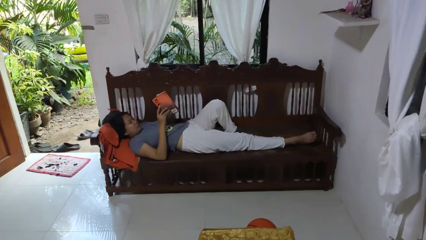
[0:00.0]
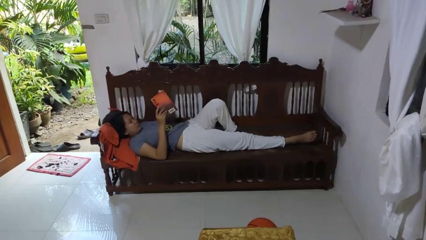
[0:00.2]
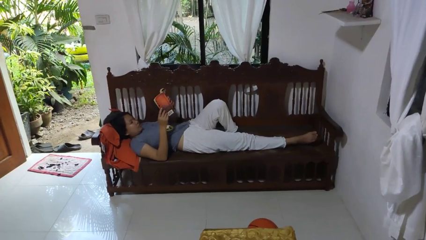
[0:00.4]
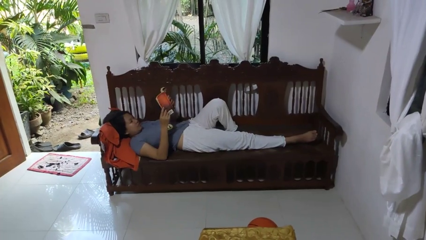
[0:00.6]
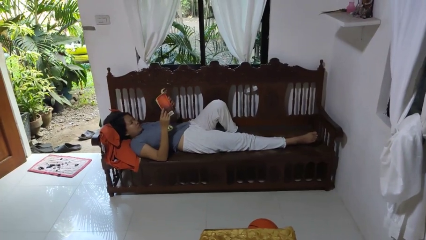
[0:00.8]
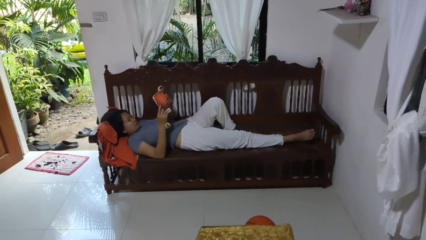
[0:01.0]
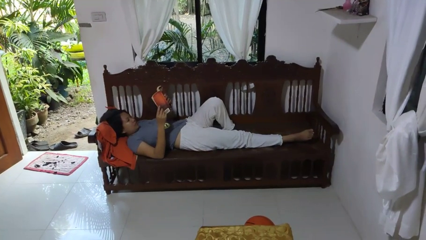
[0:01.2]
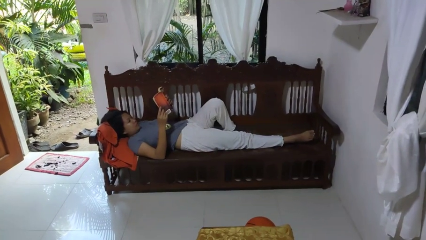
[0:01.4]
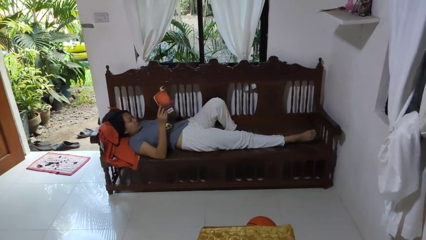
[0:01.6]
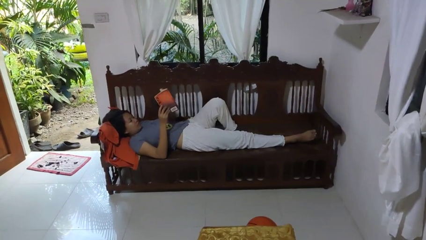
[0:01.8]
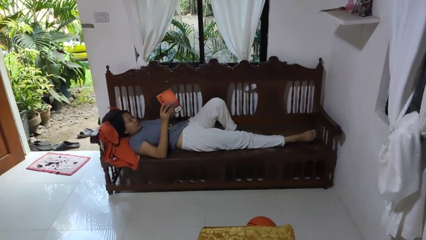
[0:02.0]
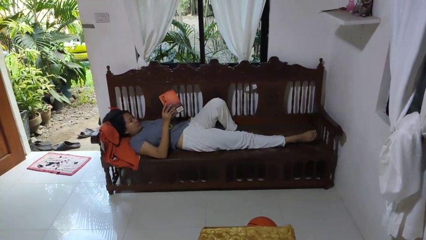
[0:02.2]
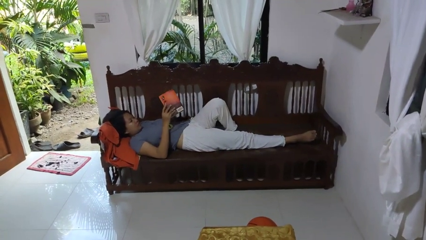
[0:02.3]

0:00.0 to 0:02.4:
person reads book

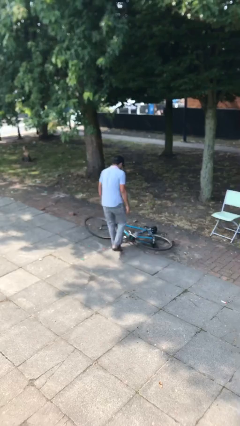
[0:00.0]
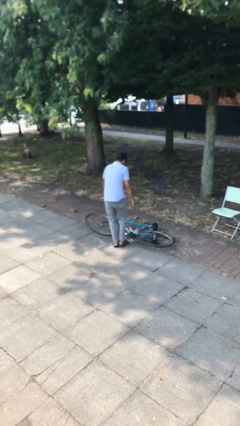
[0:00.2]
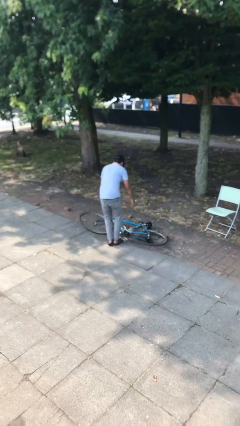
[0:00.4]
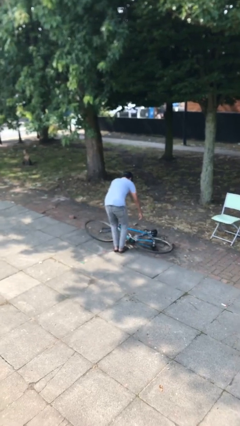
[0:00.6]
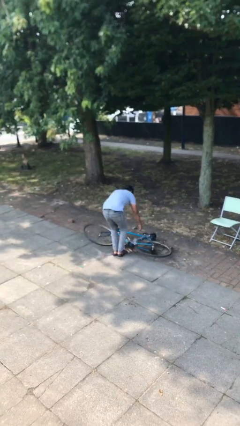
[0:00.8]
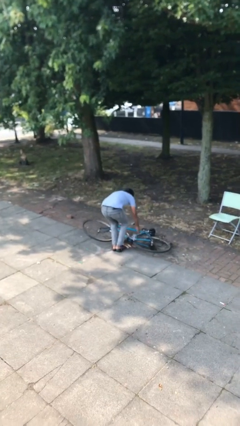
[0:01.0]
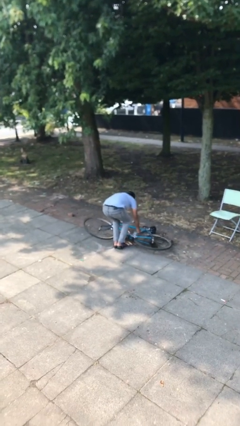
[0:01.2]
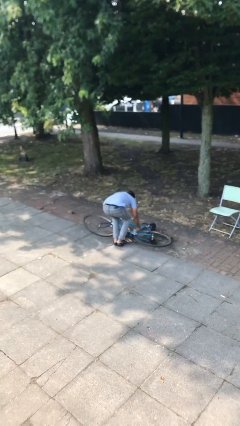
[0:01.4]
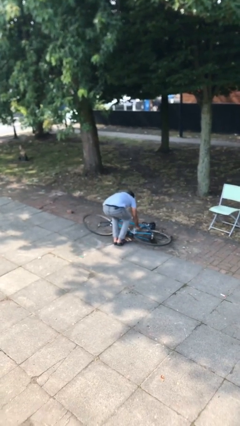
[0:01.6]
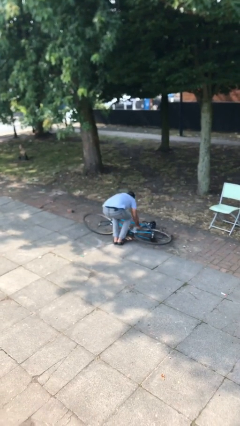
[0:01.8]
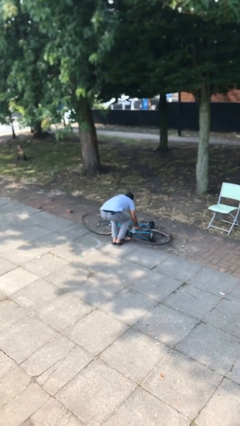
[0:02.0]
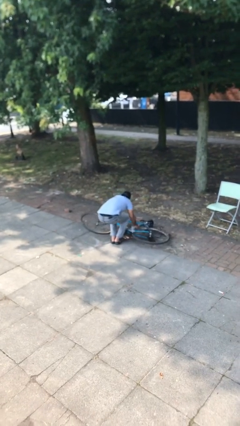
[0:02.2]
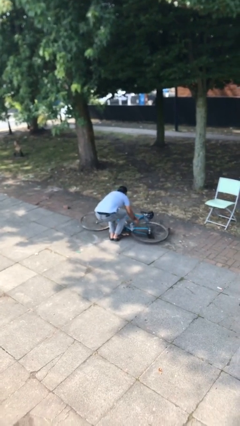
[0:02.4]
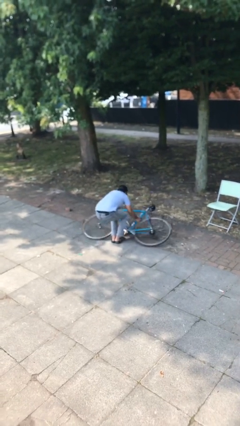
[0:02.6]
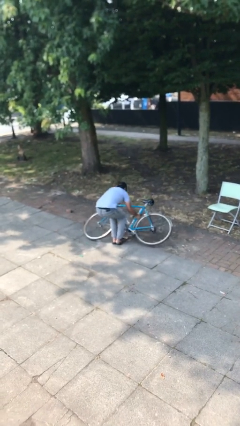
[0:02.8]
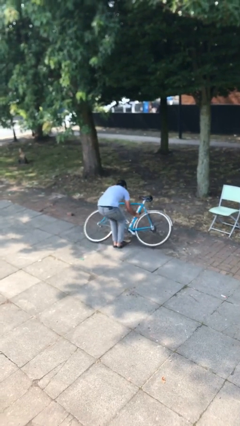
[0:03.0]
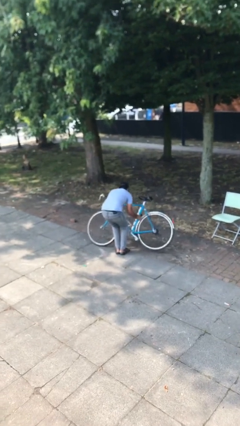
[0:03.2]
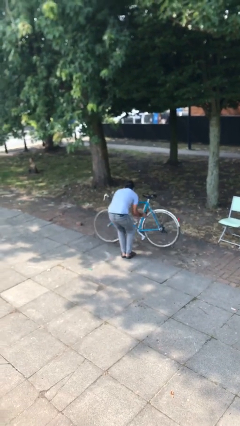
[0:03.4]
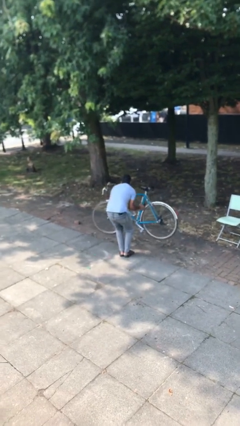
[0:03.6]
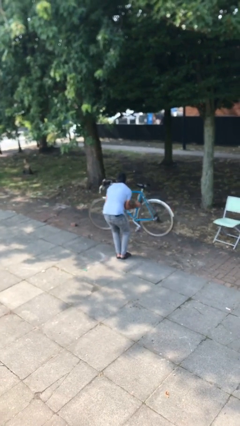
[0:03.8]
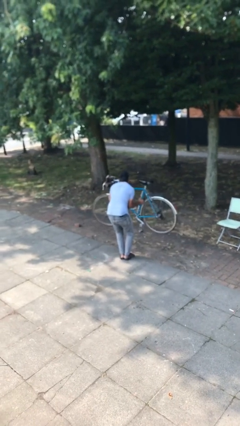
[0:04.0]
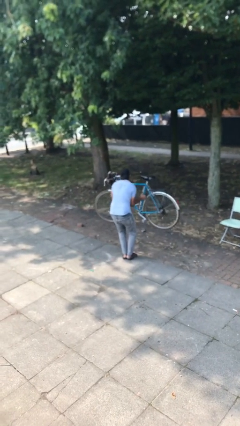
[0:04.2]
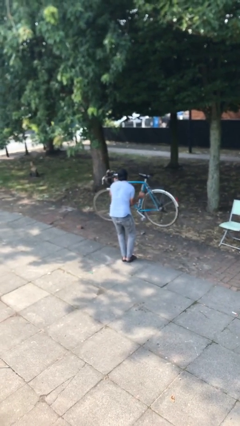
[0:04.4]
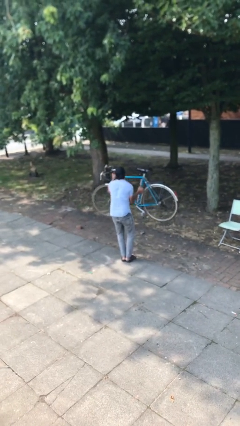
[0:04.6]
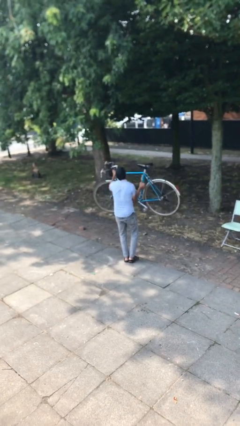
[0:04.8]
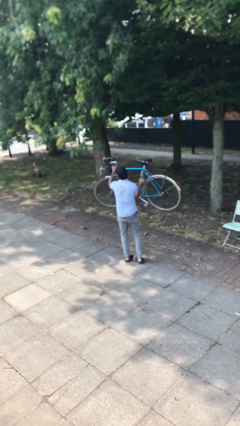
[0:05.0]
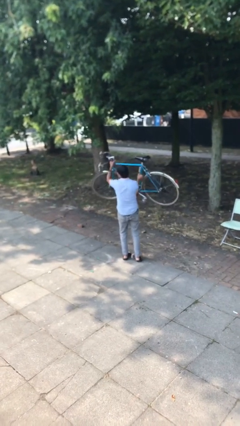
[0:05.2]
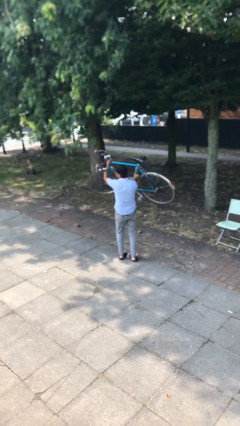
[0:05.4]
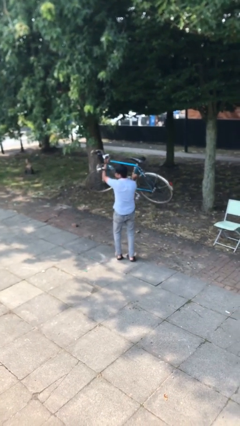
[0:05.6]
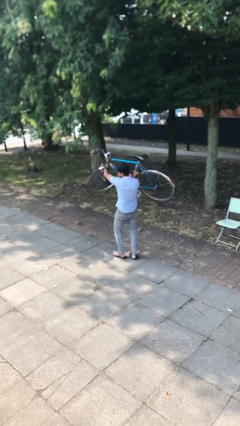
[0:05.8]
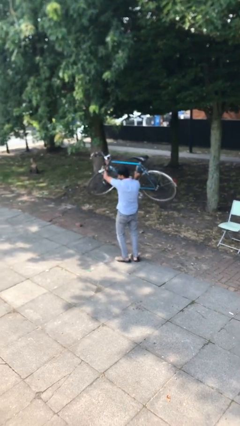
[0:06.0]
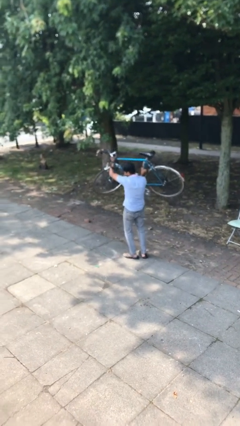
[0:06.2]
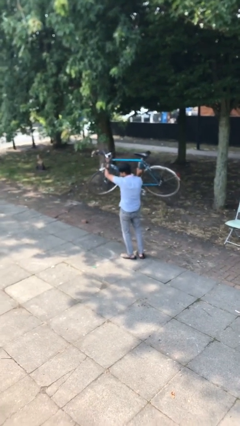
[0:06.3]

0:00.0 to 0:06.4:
person picks up object from floor

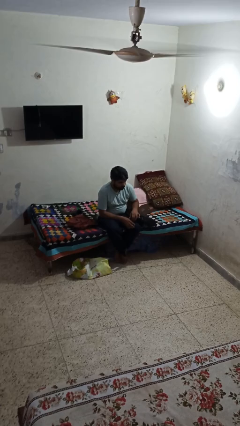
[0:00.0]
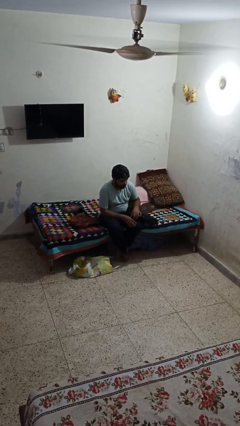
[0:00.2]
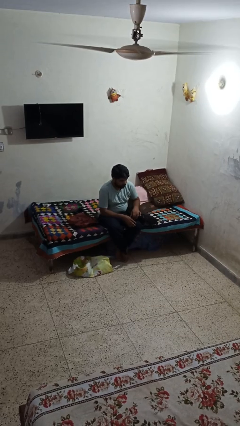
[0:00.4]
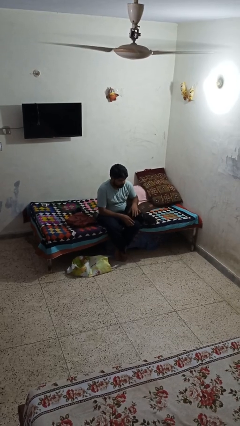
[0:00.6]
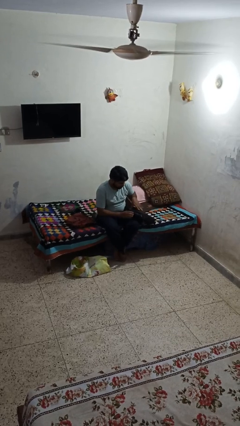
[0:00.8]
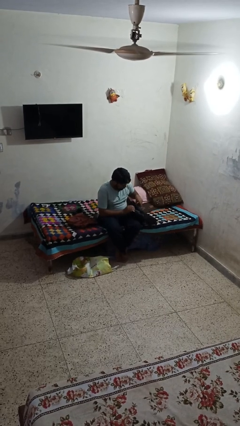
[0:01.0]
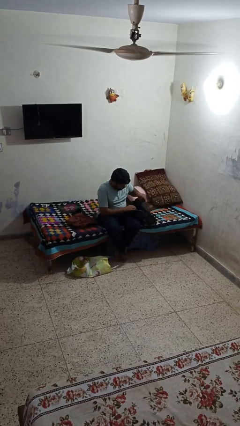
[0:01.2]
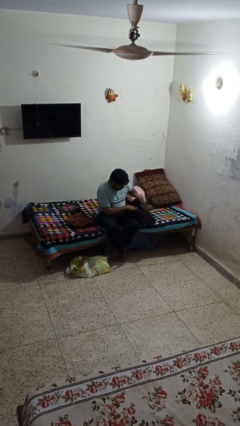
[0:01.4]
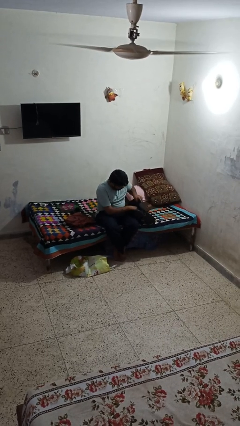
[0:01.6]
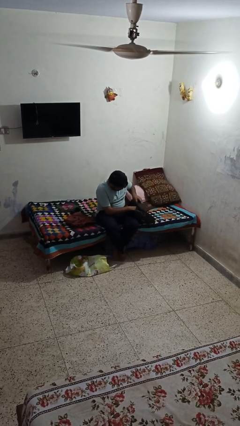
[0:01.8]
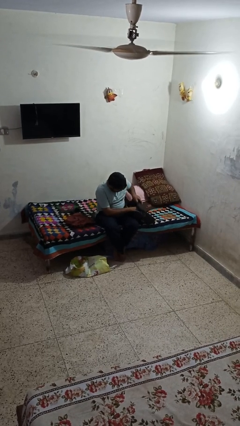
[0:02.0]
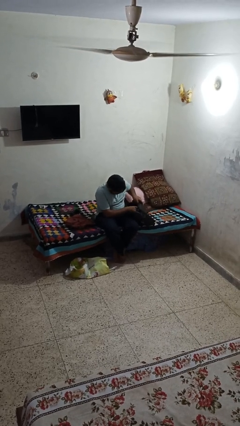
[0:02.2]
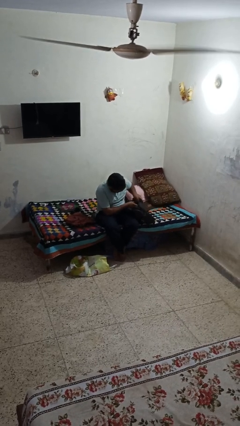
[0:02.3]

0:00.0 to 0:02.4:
person searches in backpack

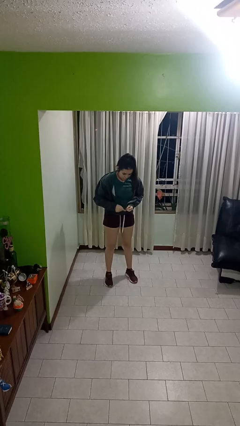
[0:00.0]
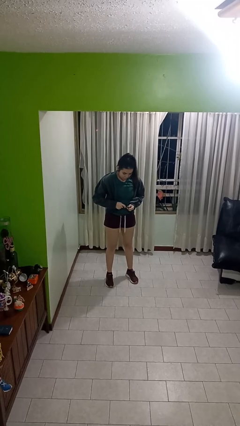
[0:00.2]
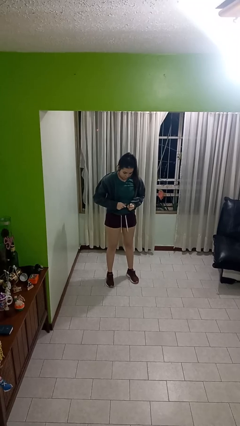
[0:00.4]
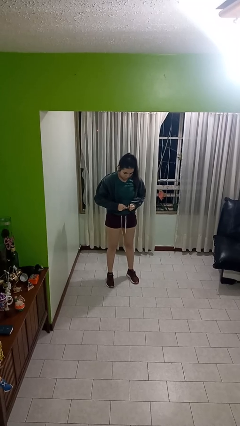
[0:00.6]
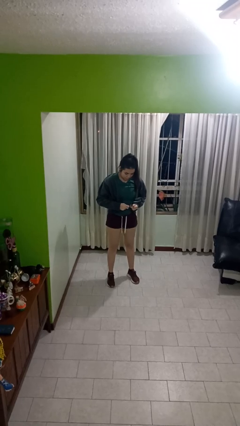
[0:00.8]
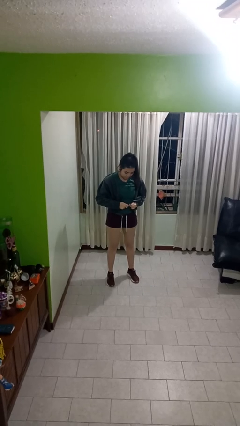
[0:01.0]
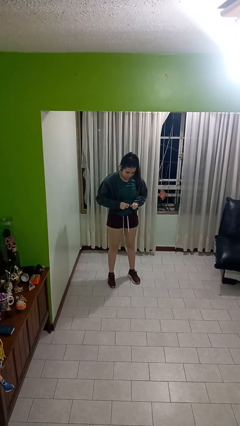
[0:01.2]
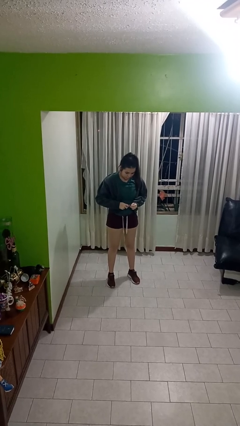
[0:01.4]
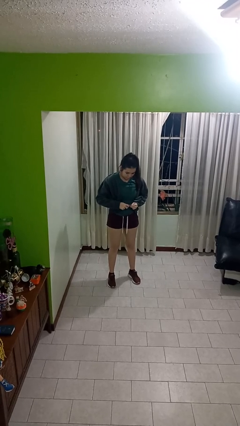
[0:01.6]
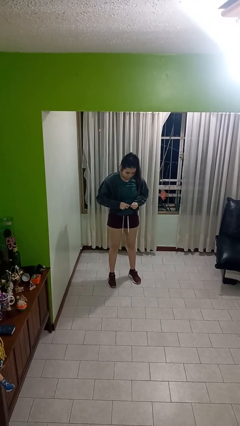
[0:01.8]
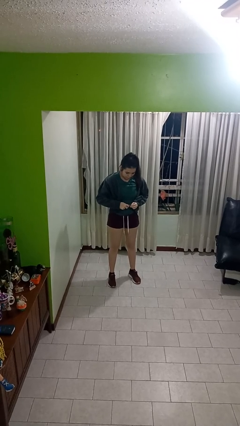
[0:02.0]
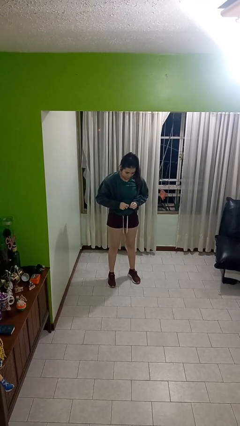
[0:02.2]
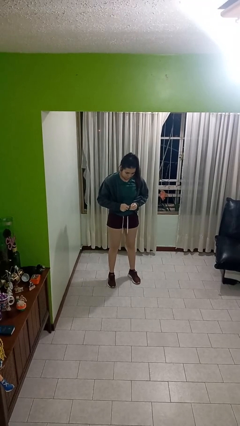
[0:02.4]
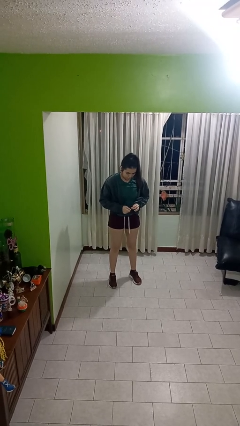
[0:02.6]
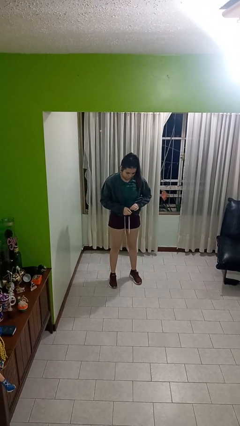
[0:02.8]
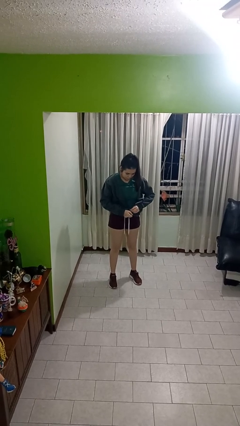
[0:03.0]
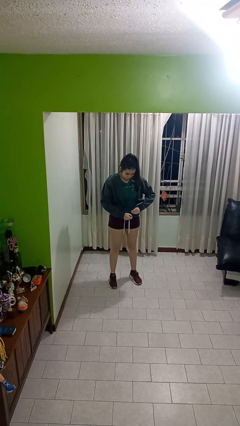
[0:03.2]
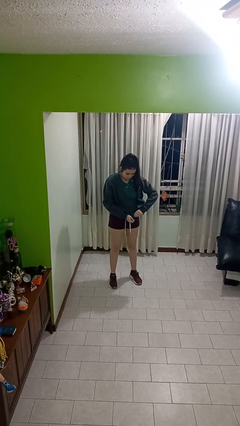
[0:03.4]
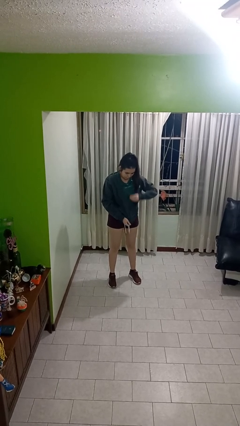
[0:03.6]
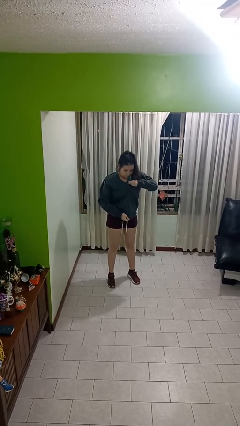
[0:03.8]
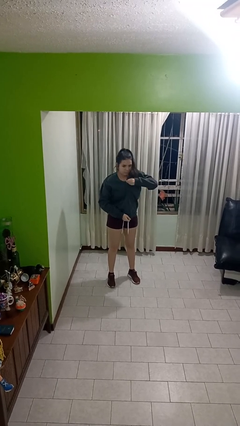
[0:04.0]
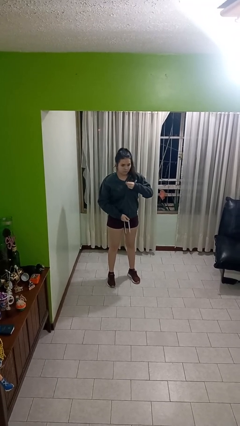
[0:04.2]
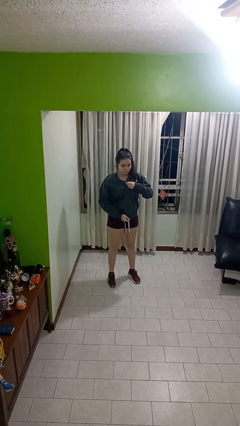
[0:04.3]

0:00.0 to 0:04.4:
person zips up jacket

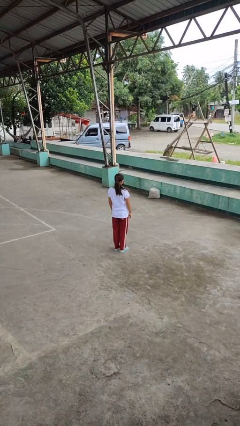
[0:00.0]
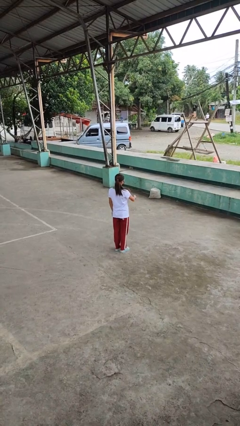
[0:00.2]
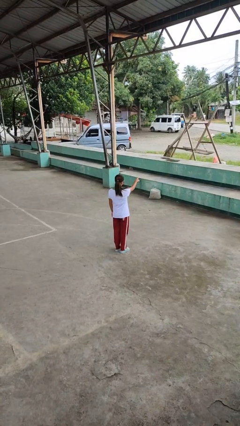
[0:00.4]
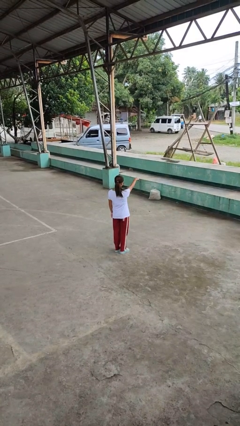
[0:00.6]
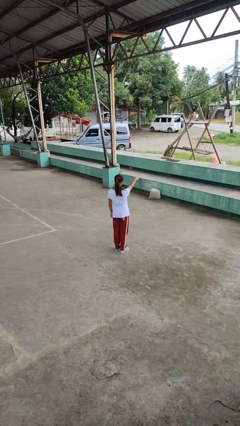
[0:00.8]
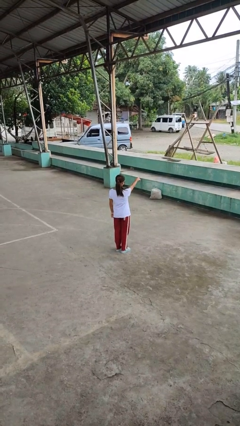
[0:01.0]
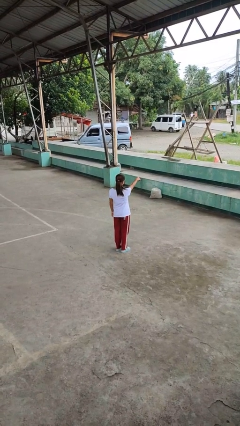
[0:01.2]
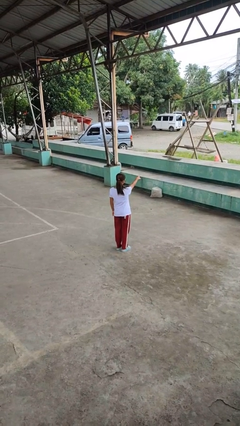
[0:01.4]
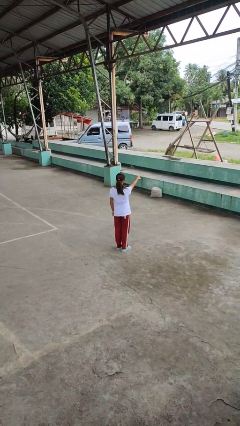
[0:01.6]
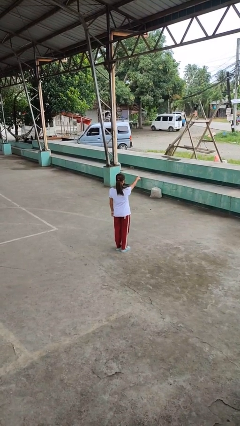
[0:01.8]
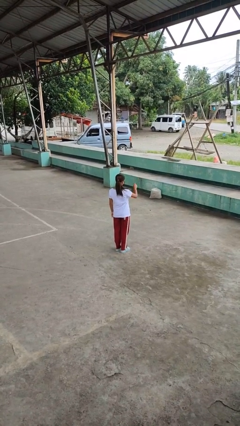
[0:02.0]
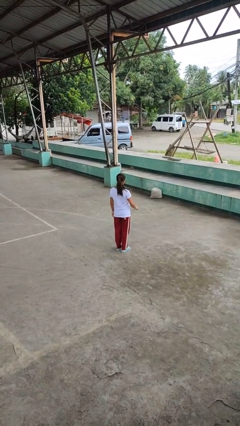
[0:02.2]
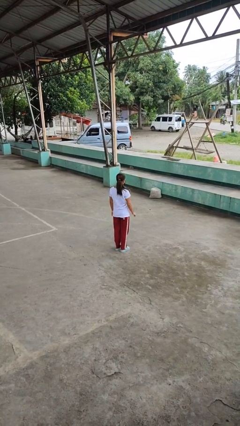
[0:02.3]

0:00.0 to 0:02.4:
person points at person
